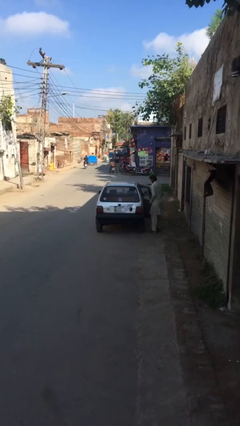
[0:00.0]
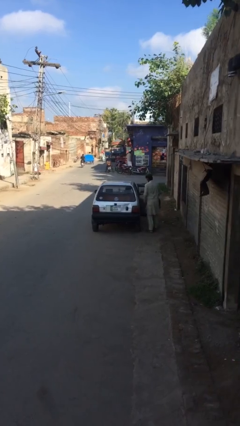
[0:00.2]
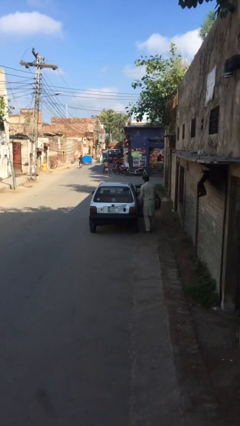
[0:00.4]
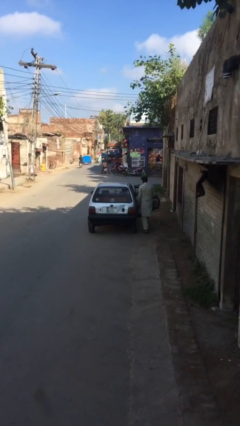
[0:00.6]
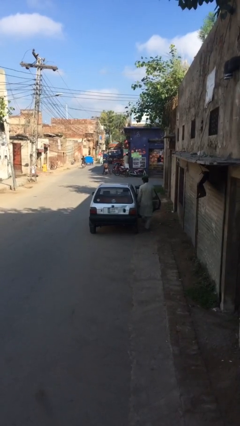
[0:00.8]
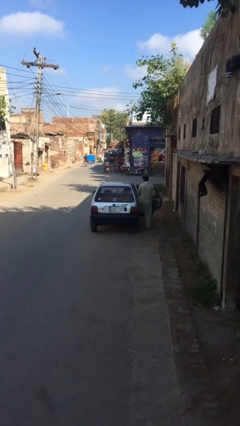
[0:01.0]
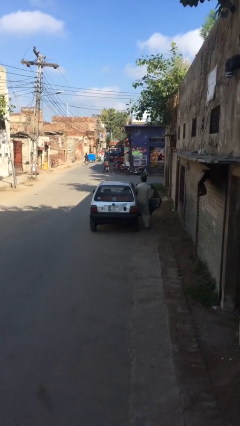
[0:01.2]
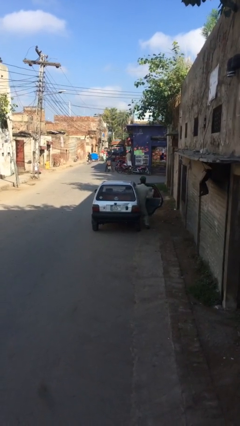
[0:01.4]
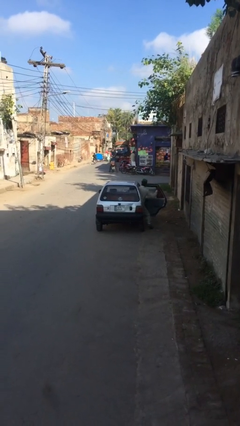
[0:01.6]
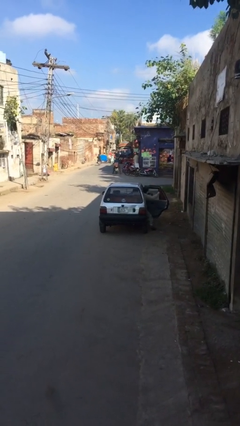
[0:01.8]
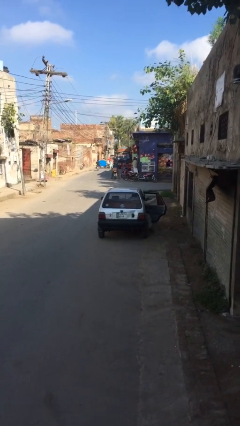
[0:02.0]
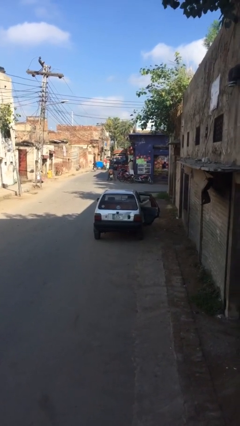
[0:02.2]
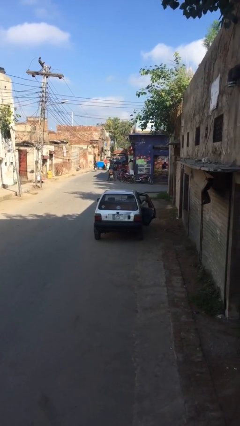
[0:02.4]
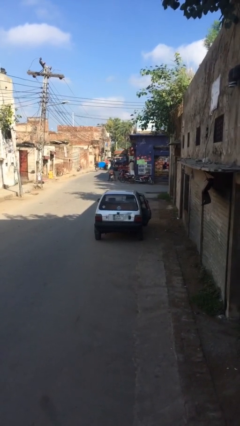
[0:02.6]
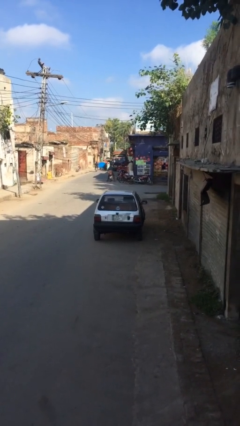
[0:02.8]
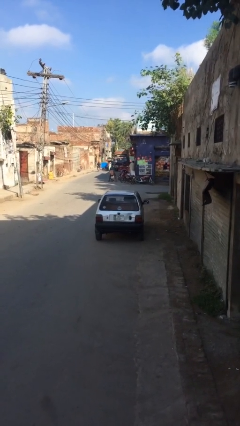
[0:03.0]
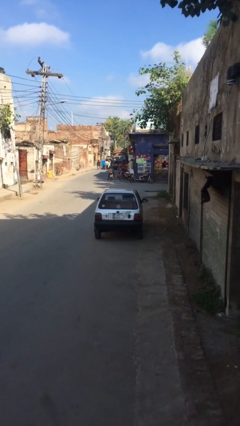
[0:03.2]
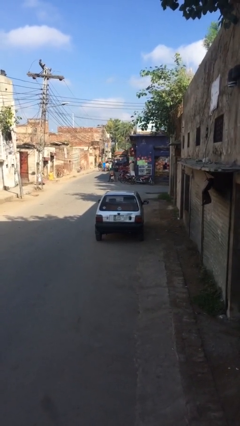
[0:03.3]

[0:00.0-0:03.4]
car picks up person

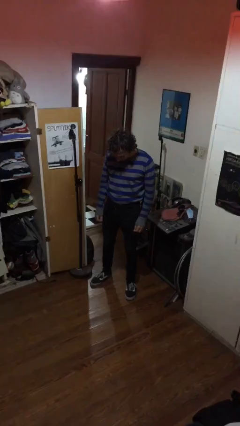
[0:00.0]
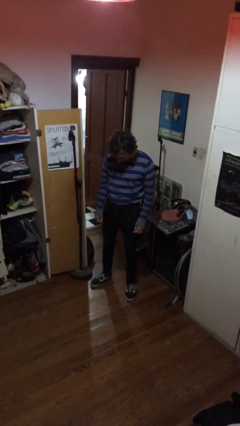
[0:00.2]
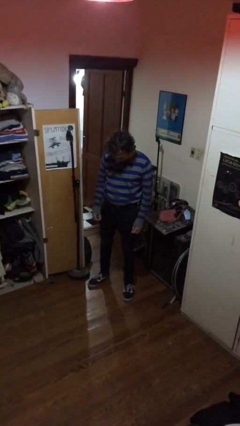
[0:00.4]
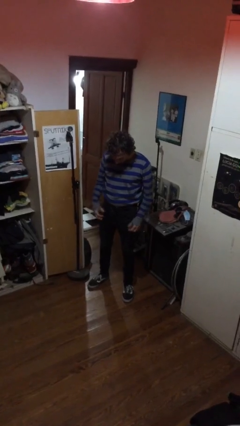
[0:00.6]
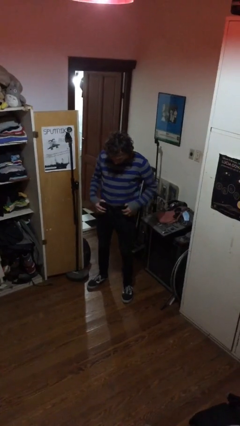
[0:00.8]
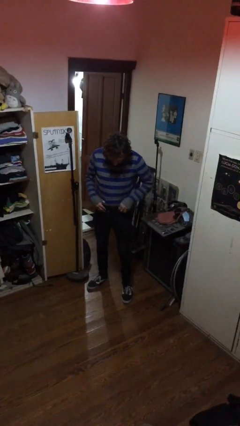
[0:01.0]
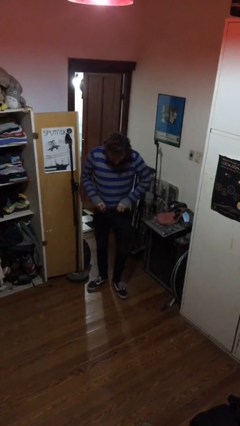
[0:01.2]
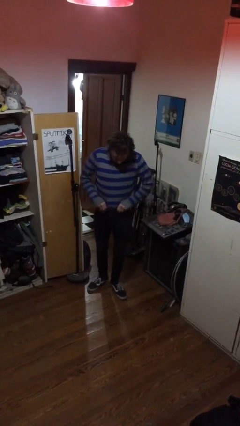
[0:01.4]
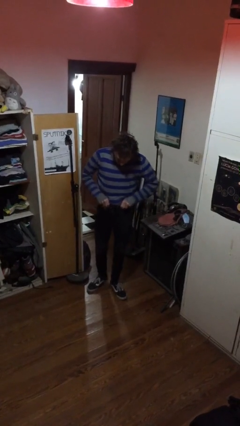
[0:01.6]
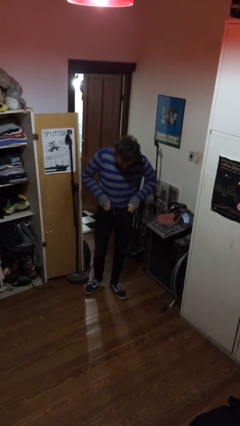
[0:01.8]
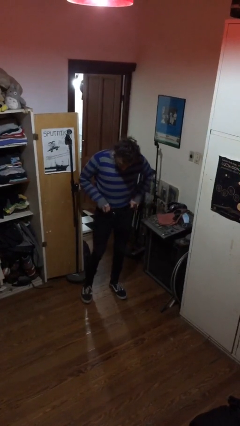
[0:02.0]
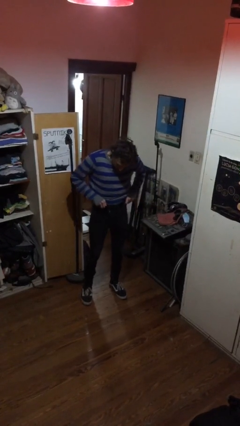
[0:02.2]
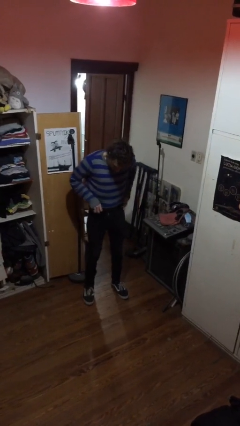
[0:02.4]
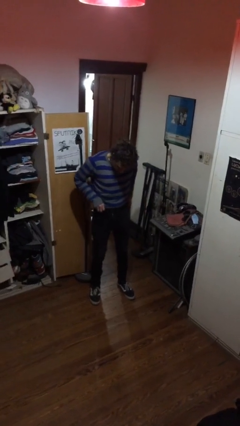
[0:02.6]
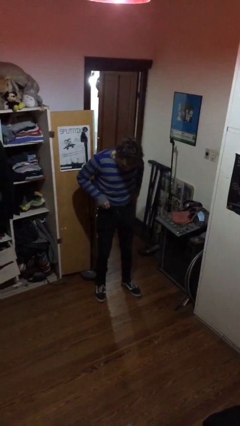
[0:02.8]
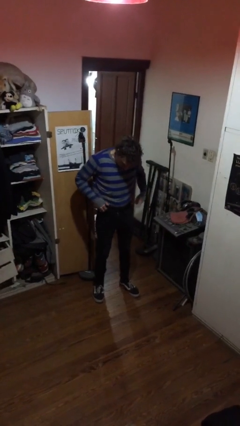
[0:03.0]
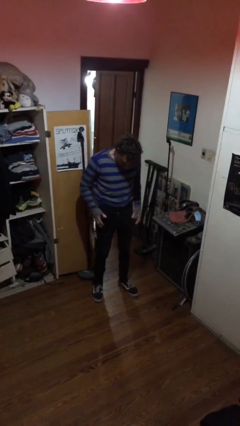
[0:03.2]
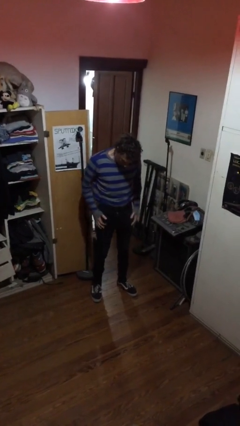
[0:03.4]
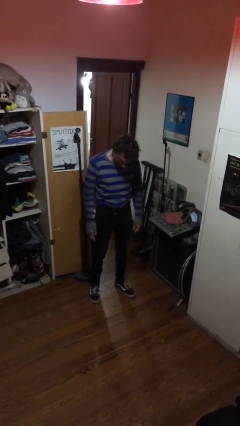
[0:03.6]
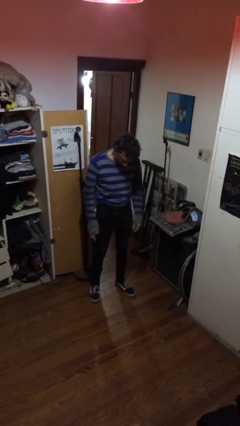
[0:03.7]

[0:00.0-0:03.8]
person hikes up pants

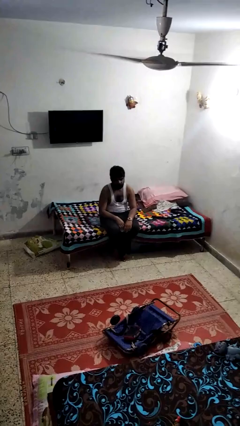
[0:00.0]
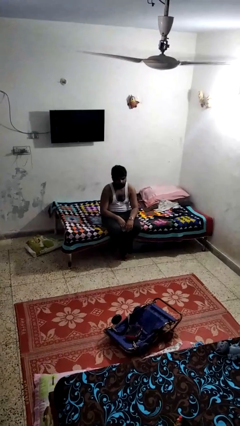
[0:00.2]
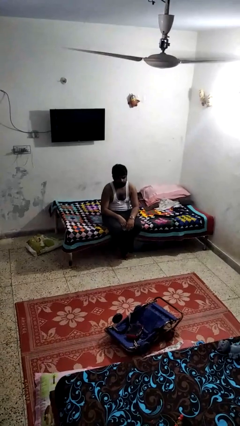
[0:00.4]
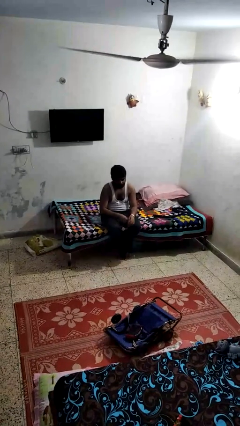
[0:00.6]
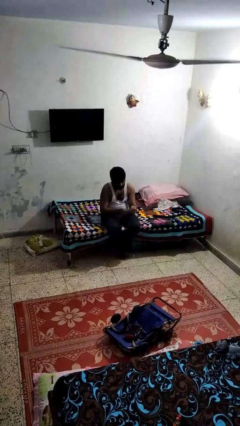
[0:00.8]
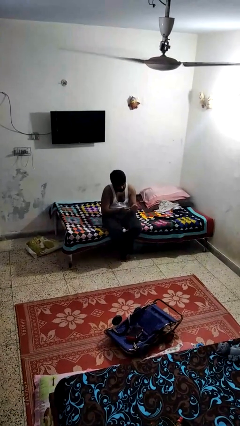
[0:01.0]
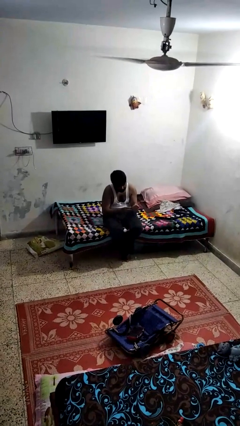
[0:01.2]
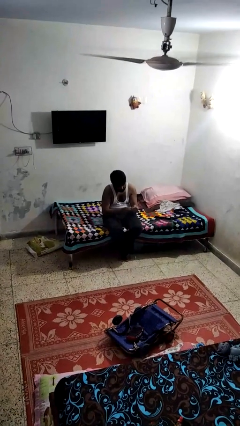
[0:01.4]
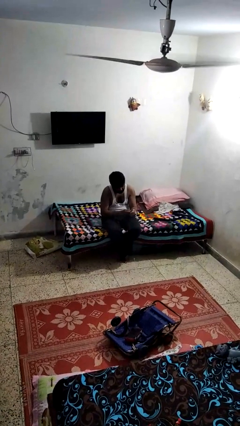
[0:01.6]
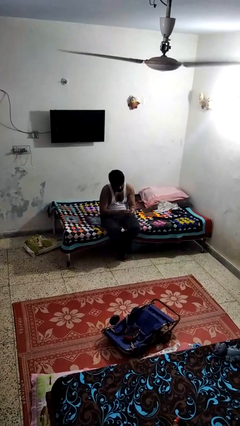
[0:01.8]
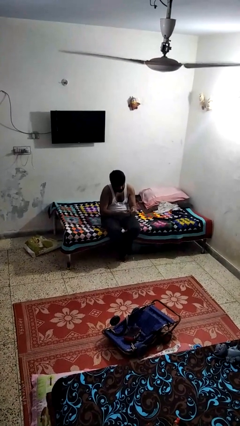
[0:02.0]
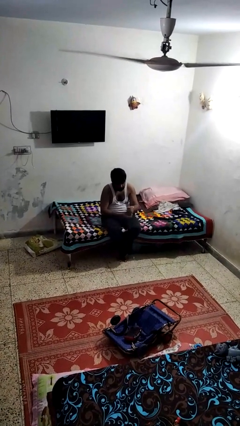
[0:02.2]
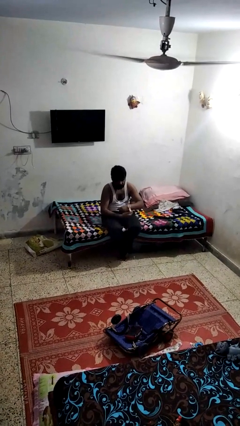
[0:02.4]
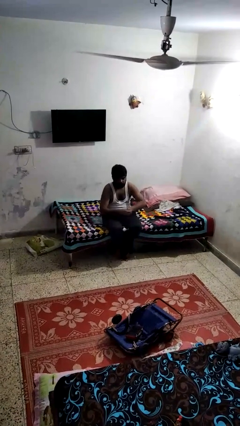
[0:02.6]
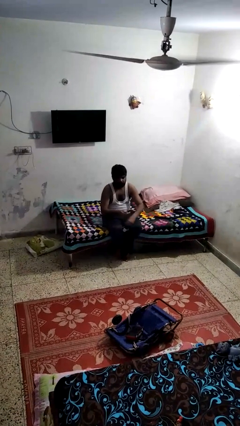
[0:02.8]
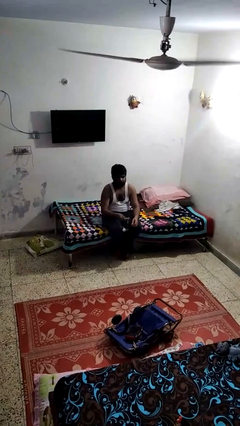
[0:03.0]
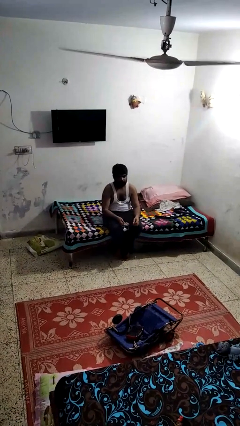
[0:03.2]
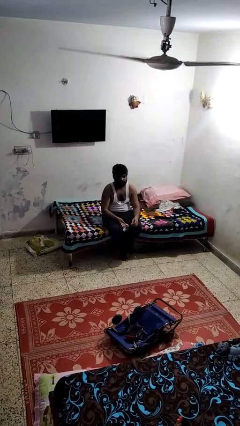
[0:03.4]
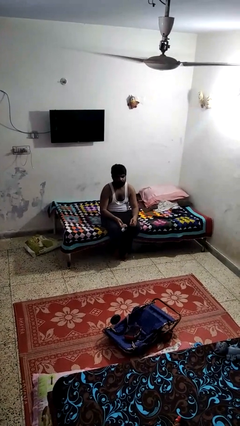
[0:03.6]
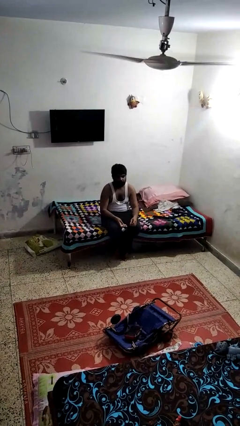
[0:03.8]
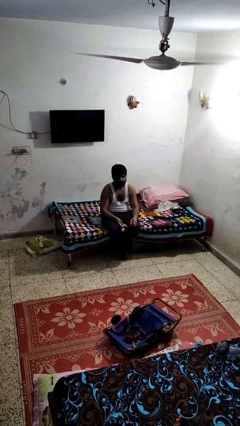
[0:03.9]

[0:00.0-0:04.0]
person takes off wristwatch

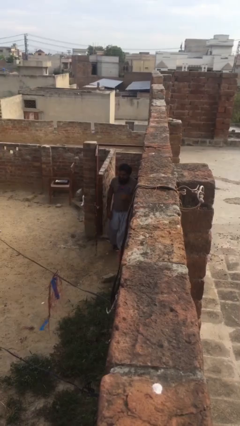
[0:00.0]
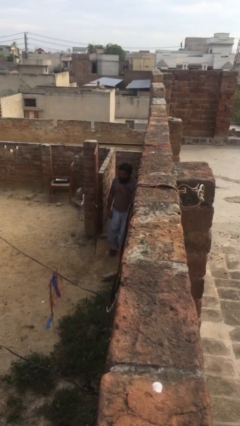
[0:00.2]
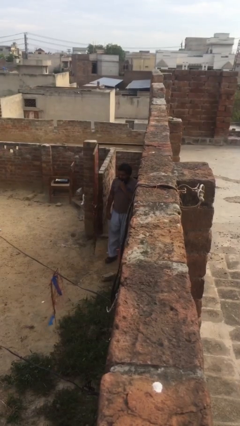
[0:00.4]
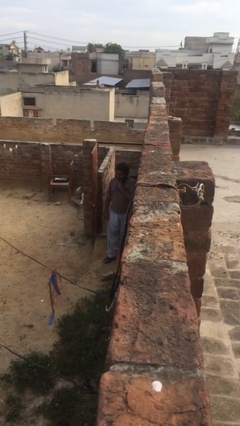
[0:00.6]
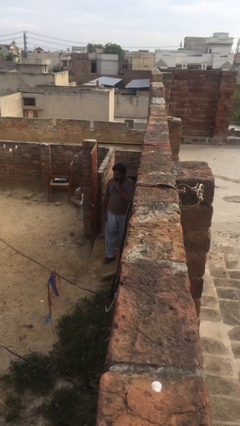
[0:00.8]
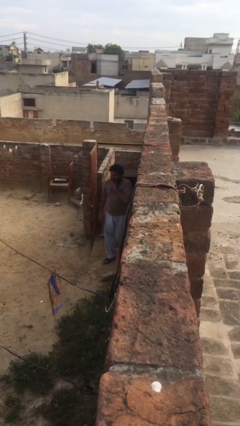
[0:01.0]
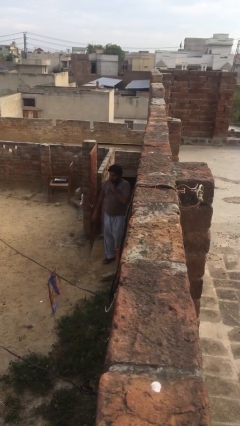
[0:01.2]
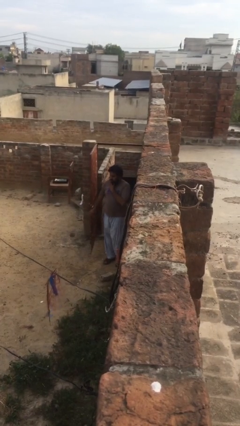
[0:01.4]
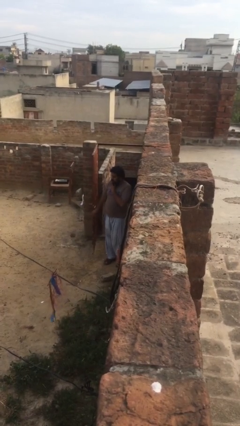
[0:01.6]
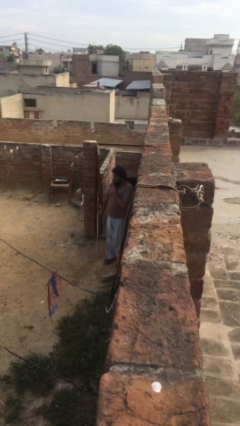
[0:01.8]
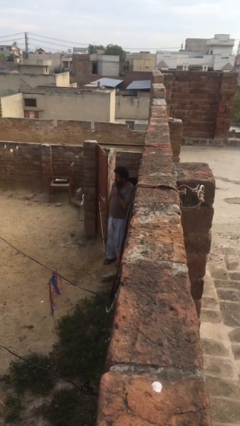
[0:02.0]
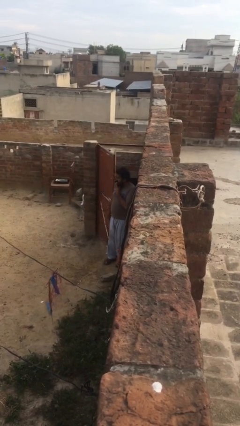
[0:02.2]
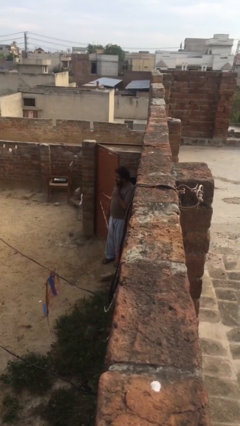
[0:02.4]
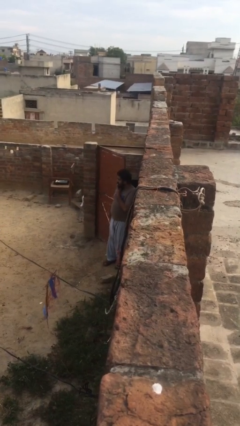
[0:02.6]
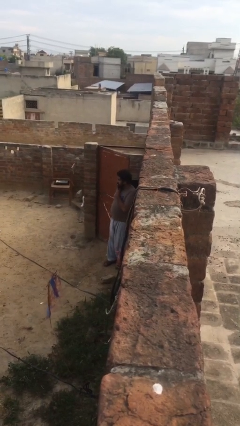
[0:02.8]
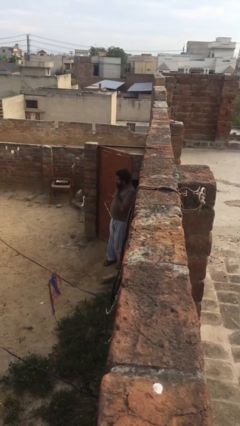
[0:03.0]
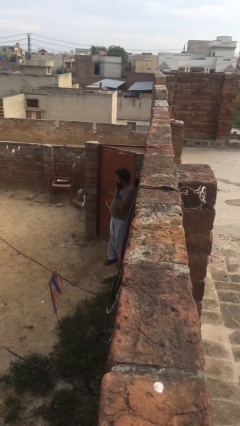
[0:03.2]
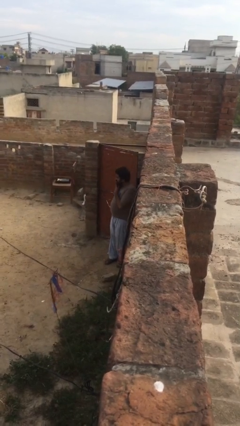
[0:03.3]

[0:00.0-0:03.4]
person closes facility door

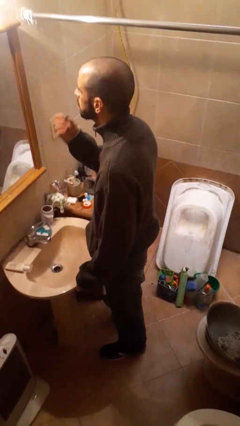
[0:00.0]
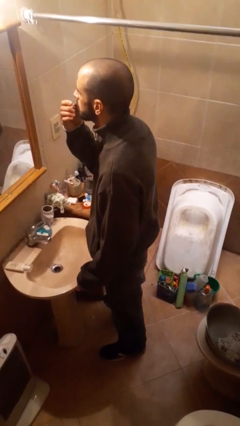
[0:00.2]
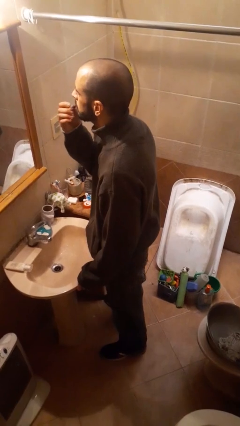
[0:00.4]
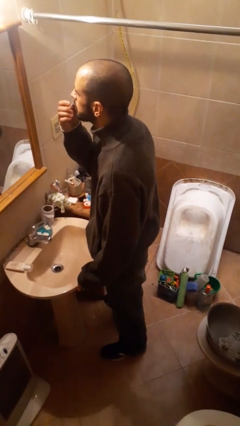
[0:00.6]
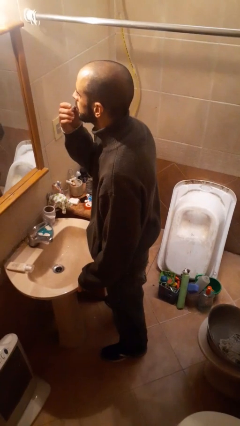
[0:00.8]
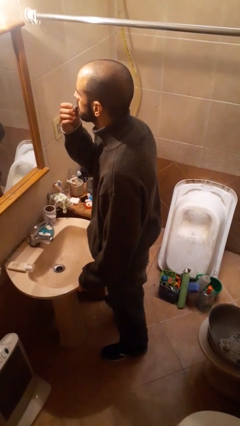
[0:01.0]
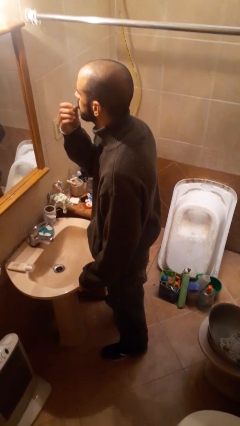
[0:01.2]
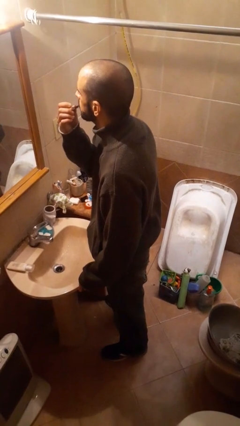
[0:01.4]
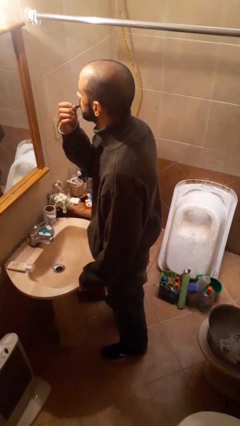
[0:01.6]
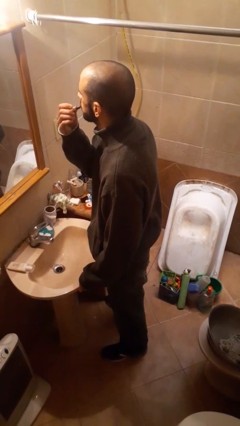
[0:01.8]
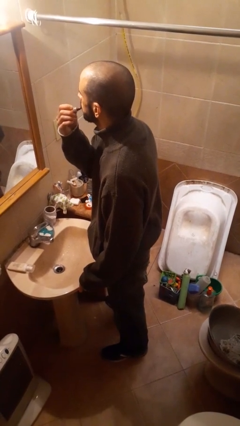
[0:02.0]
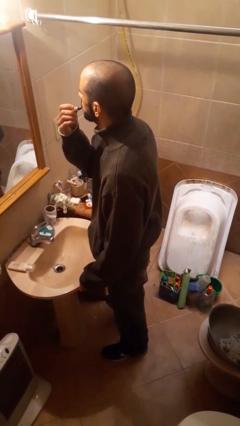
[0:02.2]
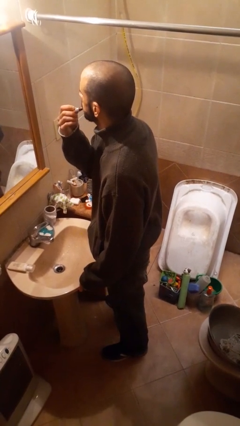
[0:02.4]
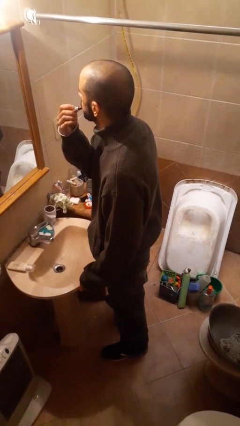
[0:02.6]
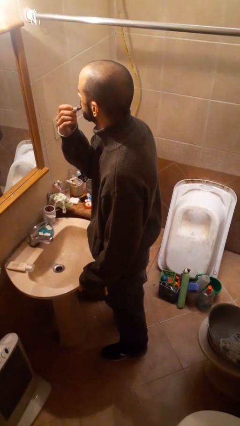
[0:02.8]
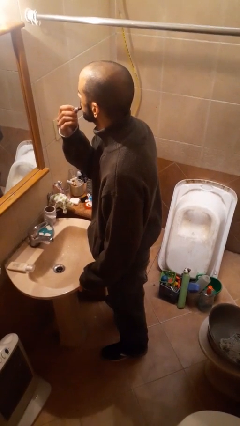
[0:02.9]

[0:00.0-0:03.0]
person applies lip makeup
